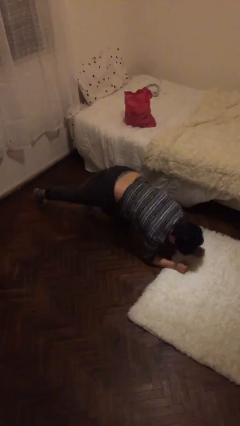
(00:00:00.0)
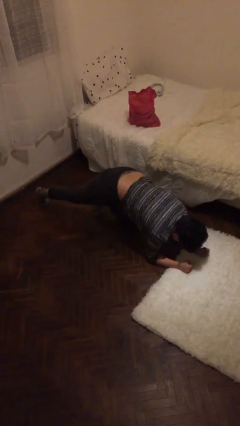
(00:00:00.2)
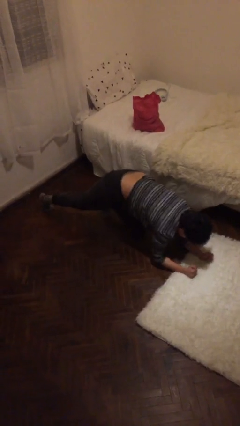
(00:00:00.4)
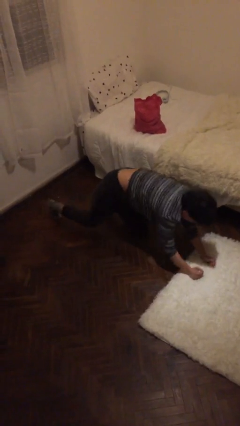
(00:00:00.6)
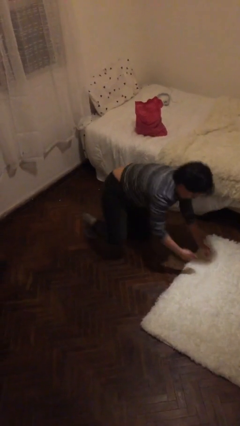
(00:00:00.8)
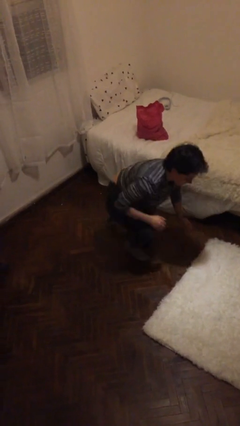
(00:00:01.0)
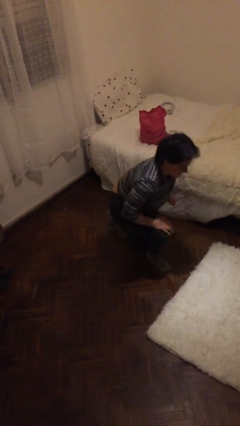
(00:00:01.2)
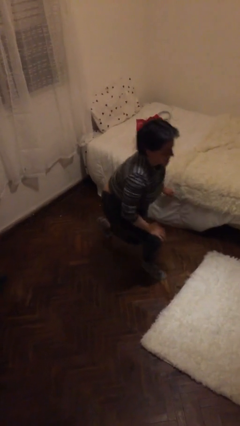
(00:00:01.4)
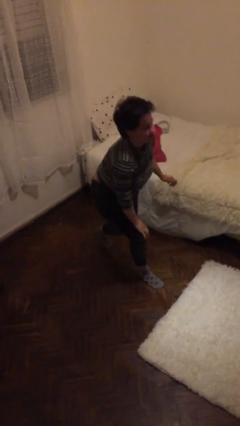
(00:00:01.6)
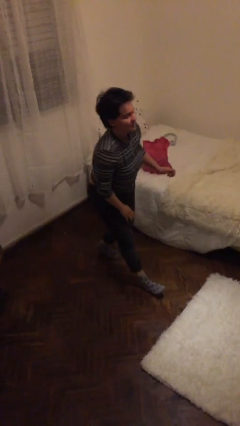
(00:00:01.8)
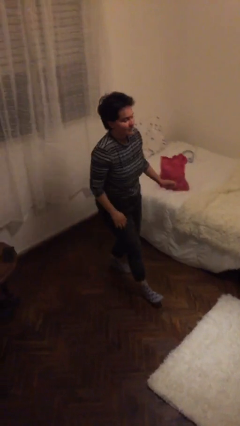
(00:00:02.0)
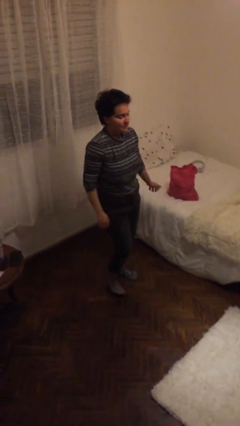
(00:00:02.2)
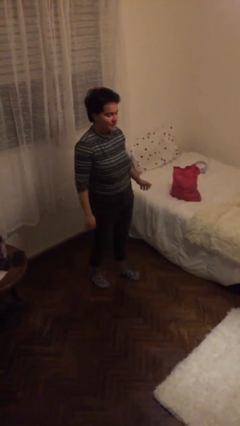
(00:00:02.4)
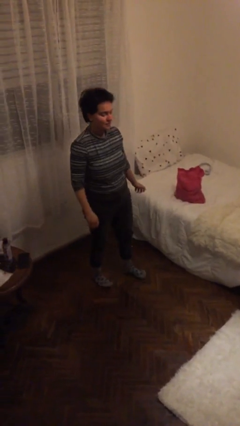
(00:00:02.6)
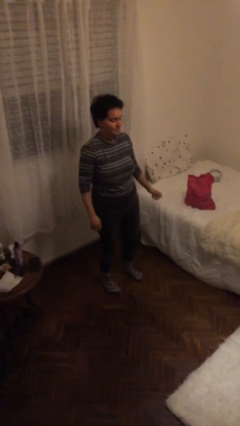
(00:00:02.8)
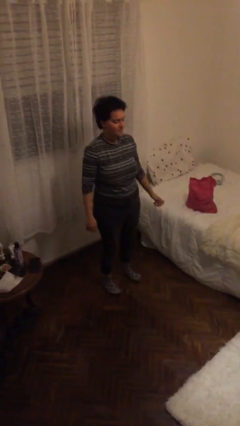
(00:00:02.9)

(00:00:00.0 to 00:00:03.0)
person stands up from floor

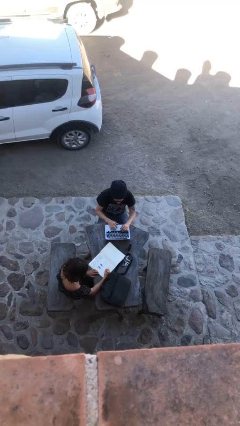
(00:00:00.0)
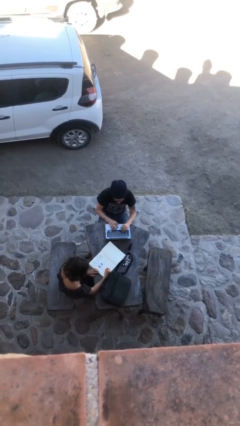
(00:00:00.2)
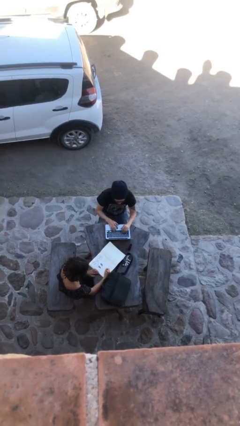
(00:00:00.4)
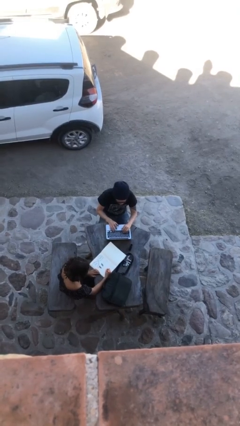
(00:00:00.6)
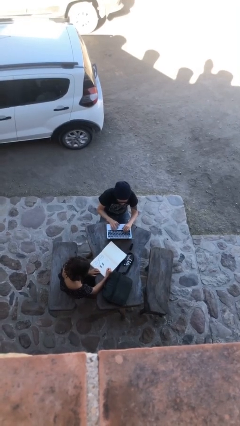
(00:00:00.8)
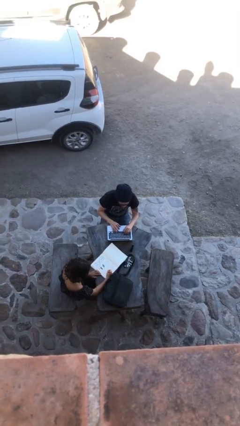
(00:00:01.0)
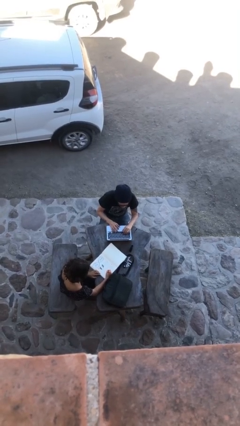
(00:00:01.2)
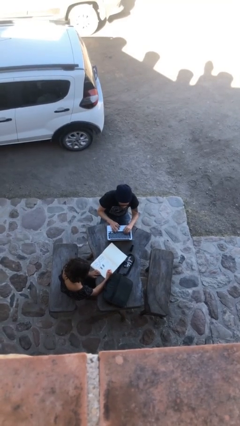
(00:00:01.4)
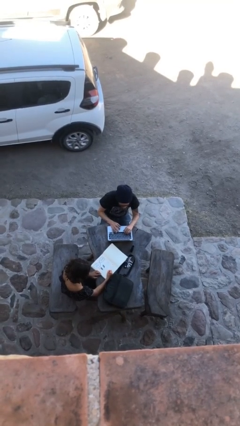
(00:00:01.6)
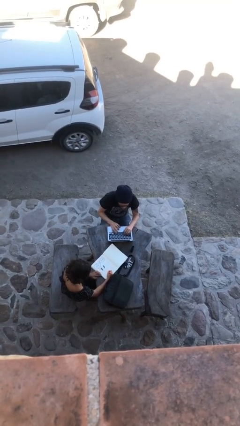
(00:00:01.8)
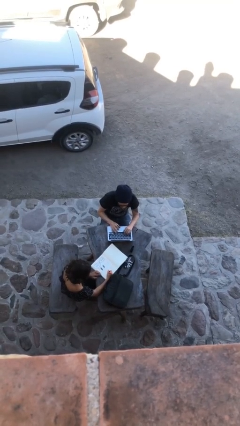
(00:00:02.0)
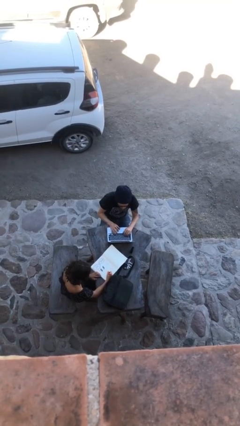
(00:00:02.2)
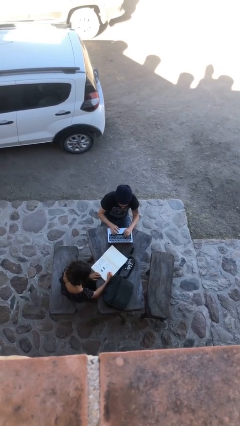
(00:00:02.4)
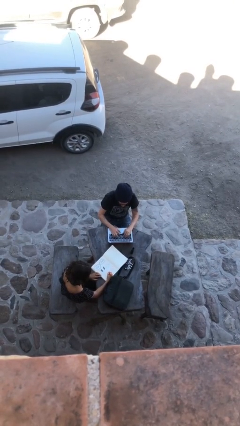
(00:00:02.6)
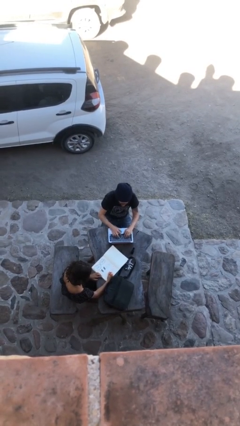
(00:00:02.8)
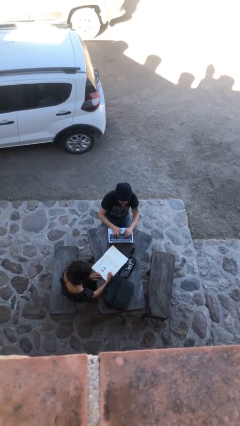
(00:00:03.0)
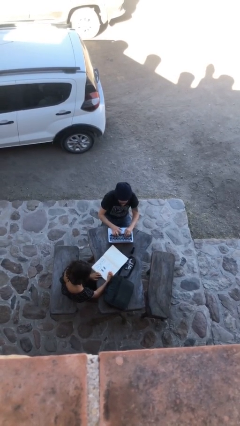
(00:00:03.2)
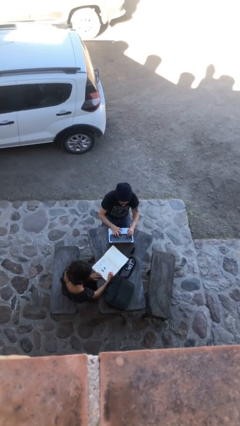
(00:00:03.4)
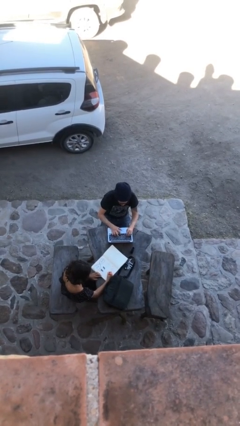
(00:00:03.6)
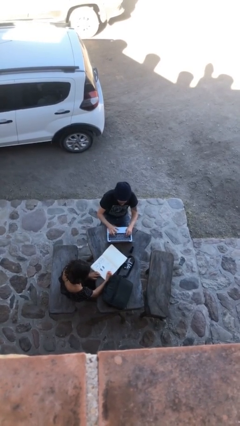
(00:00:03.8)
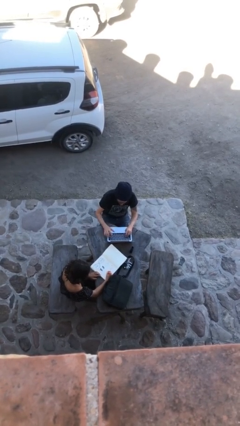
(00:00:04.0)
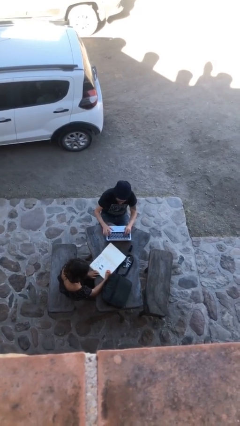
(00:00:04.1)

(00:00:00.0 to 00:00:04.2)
person interacts with laptop

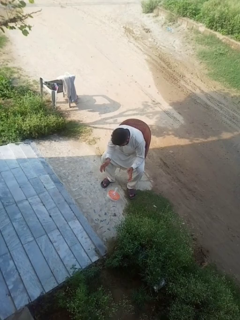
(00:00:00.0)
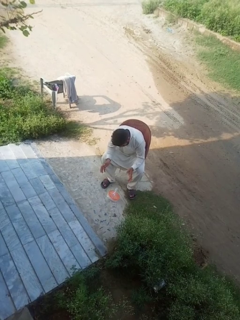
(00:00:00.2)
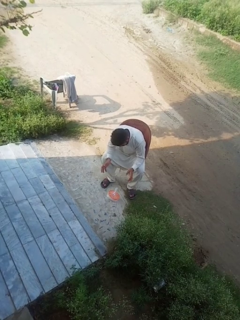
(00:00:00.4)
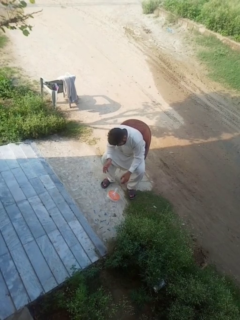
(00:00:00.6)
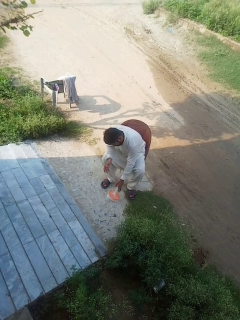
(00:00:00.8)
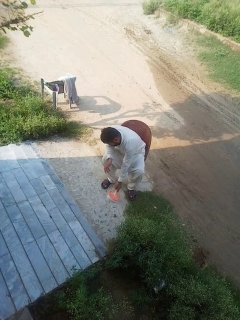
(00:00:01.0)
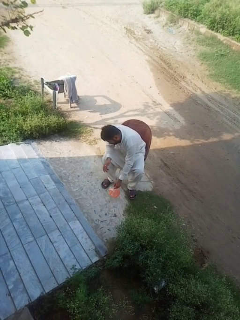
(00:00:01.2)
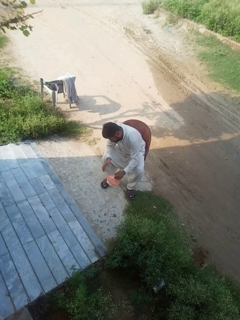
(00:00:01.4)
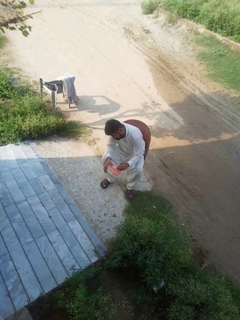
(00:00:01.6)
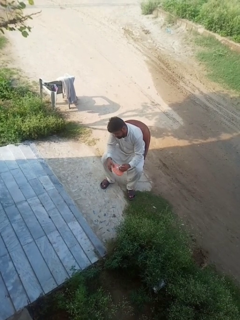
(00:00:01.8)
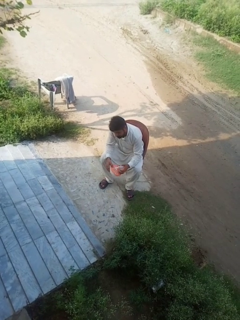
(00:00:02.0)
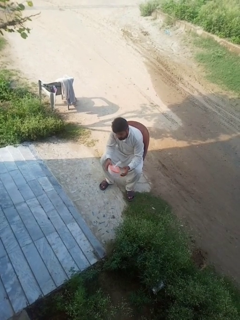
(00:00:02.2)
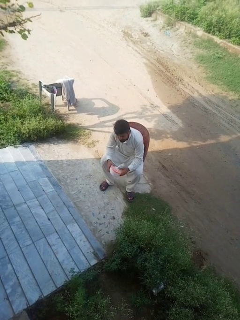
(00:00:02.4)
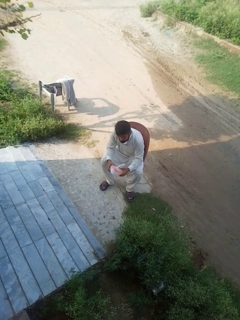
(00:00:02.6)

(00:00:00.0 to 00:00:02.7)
person picks up object from floor

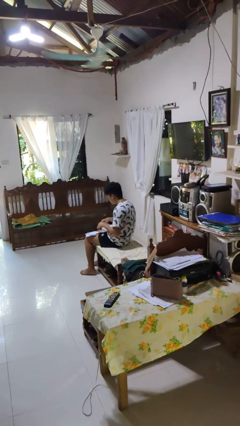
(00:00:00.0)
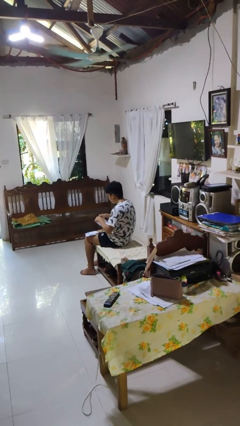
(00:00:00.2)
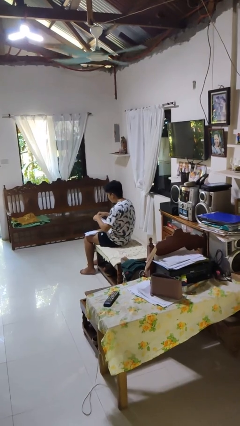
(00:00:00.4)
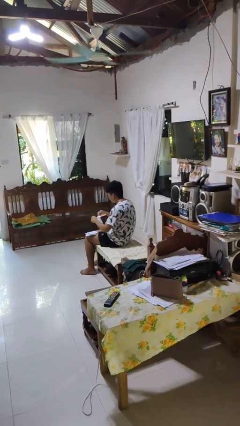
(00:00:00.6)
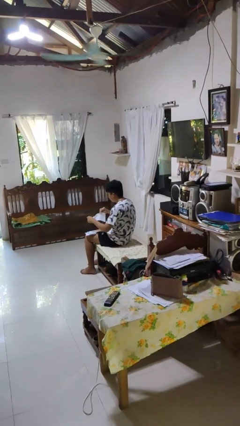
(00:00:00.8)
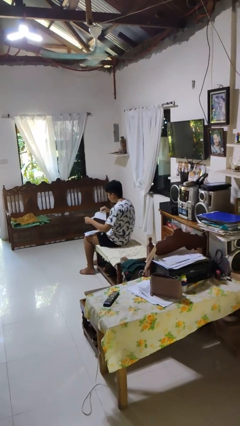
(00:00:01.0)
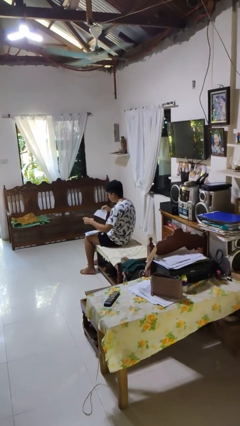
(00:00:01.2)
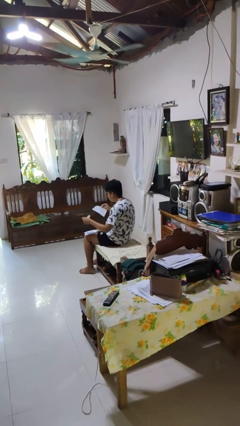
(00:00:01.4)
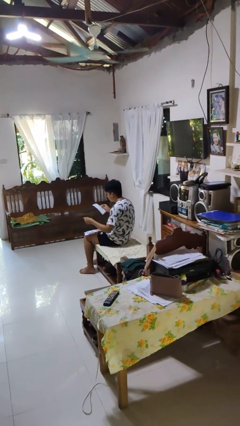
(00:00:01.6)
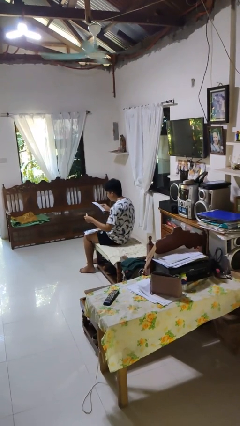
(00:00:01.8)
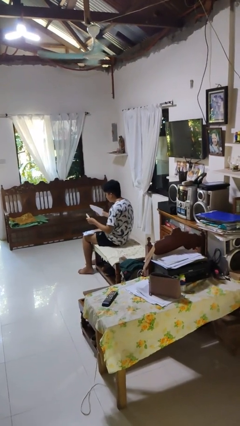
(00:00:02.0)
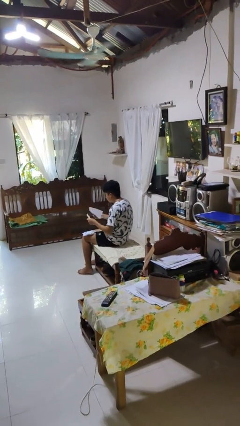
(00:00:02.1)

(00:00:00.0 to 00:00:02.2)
person tears paper

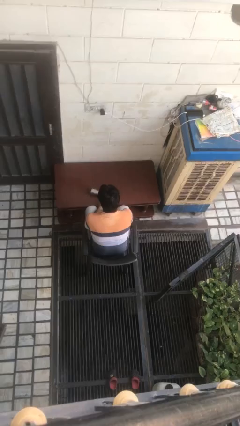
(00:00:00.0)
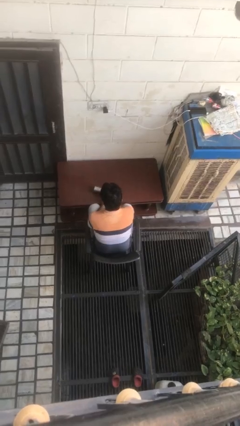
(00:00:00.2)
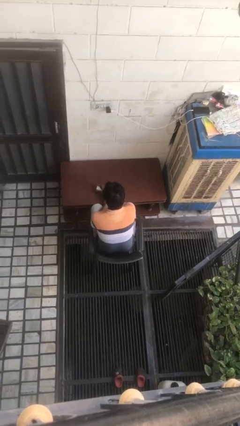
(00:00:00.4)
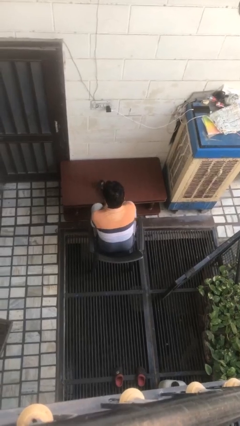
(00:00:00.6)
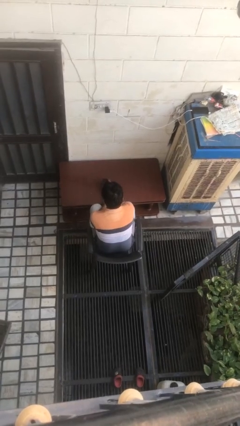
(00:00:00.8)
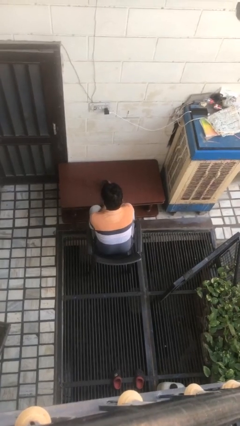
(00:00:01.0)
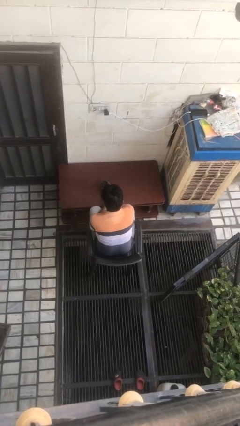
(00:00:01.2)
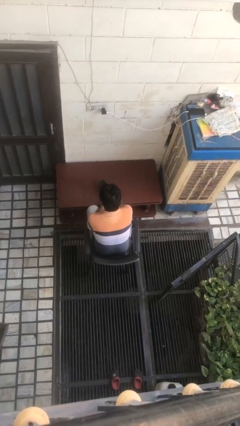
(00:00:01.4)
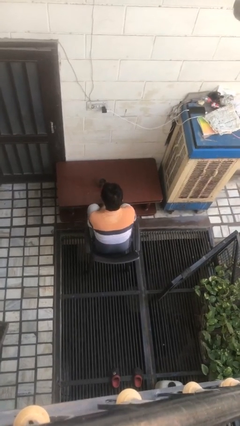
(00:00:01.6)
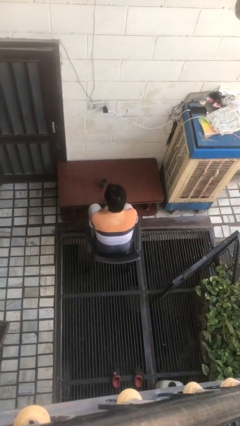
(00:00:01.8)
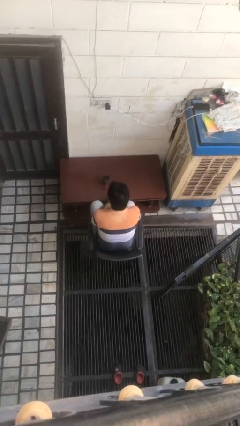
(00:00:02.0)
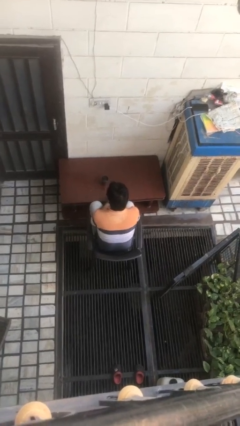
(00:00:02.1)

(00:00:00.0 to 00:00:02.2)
person sets upright glass

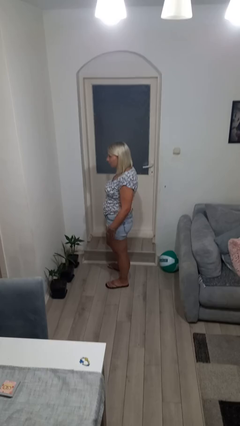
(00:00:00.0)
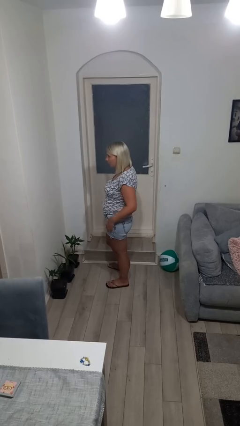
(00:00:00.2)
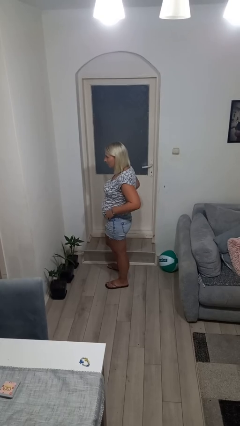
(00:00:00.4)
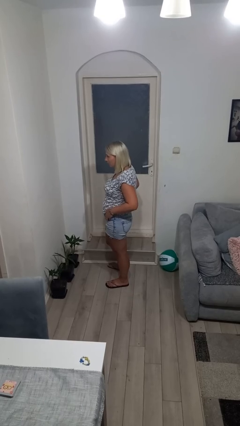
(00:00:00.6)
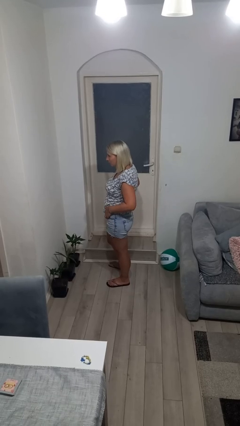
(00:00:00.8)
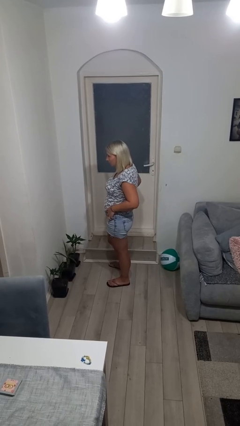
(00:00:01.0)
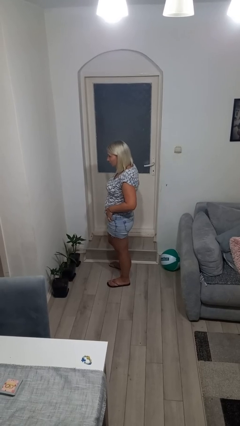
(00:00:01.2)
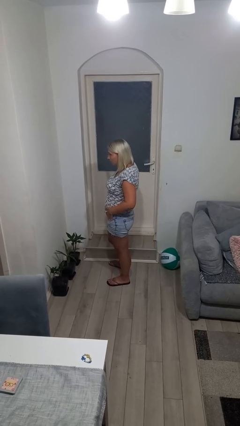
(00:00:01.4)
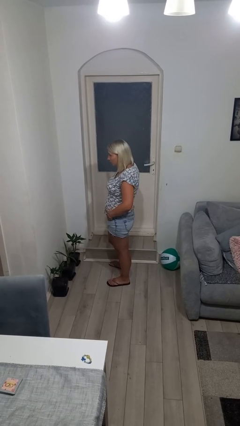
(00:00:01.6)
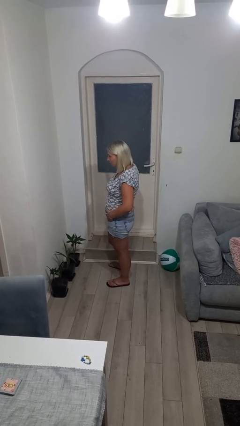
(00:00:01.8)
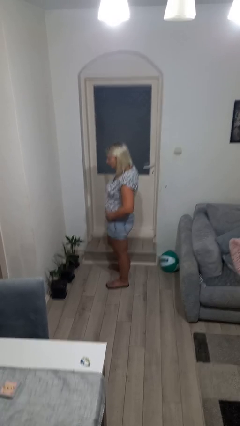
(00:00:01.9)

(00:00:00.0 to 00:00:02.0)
person puts hands in back pockets

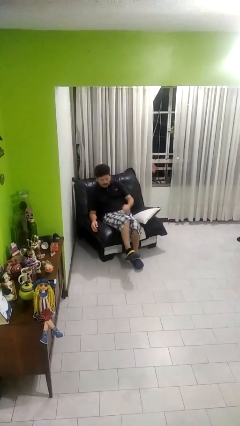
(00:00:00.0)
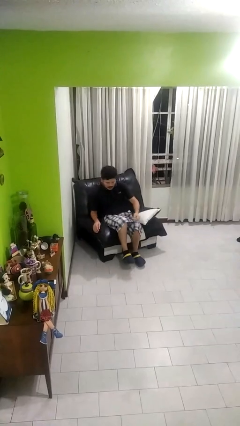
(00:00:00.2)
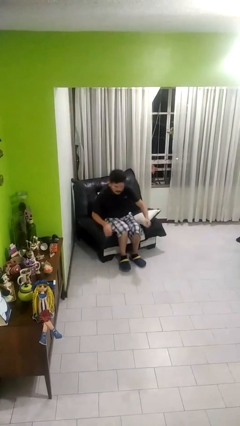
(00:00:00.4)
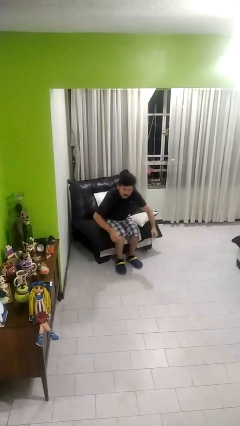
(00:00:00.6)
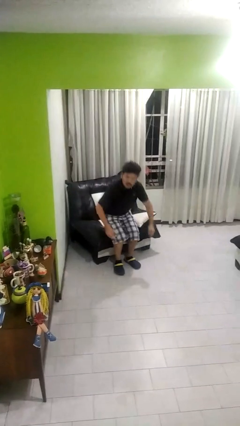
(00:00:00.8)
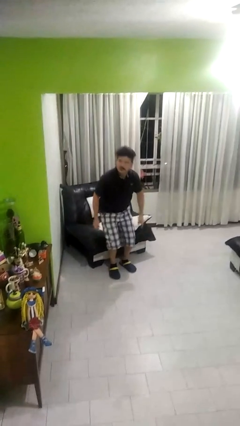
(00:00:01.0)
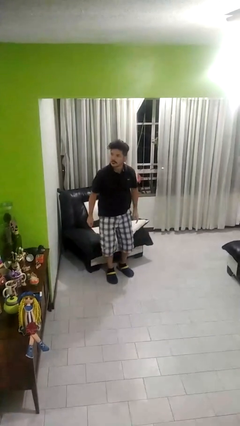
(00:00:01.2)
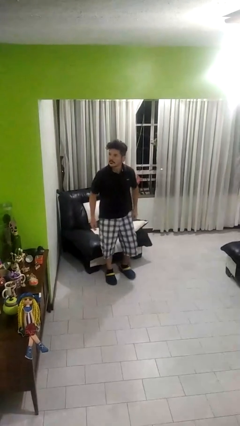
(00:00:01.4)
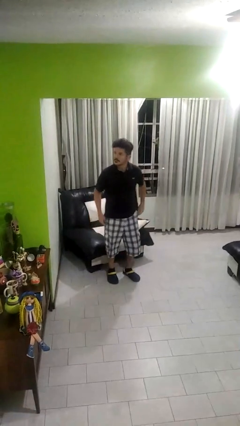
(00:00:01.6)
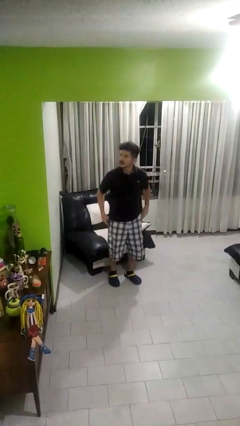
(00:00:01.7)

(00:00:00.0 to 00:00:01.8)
person stands up
